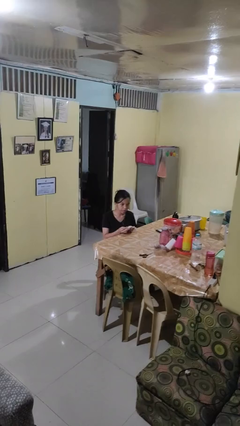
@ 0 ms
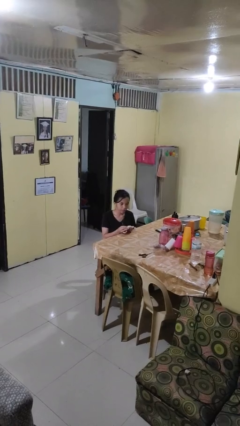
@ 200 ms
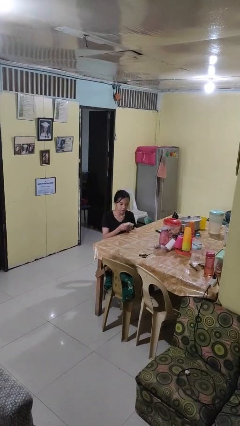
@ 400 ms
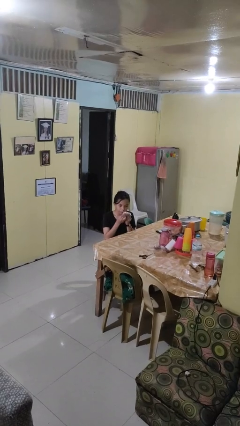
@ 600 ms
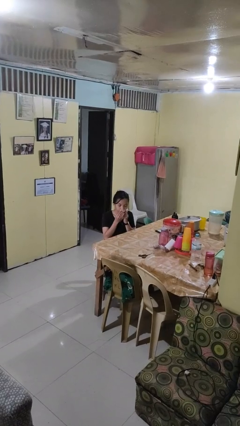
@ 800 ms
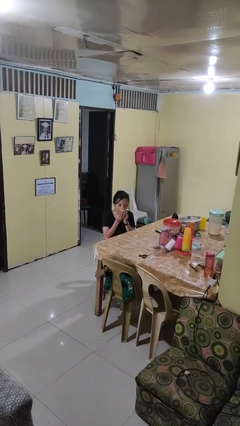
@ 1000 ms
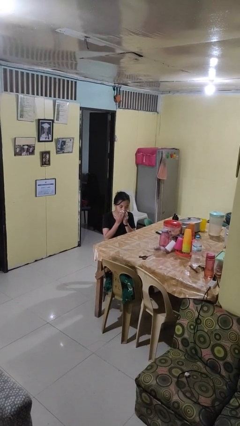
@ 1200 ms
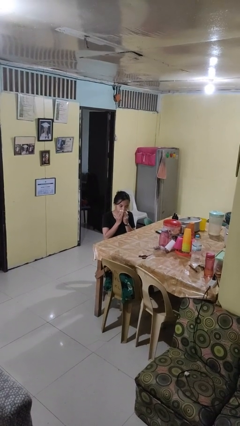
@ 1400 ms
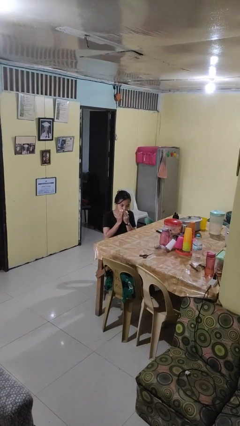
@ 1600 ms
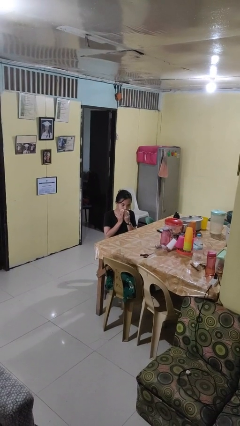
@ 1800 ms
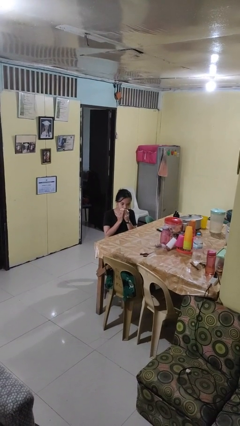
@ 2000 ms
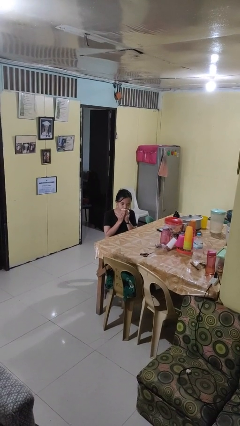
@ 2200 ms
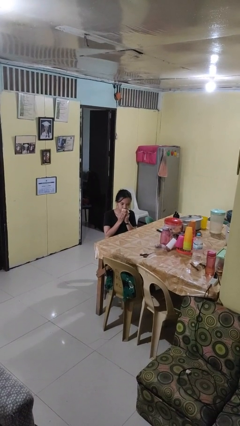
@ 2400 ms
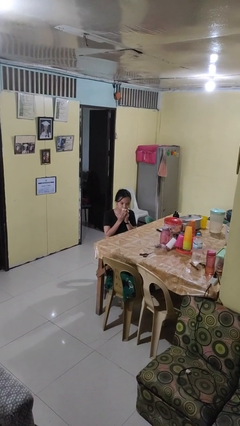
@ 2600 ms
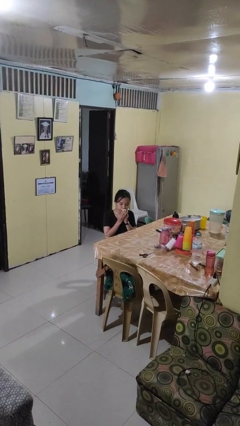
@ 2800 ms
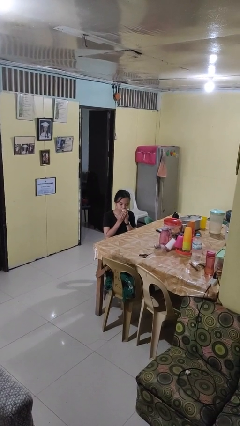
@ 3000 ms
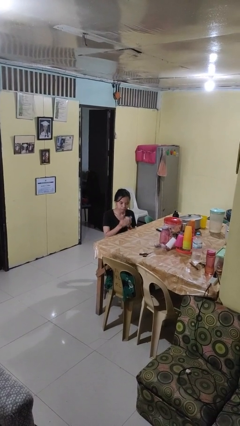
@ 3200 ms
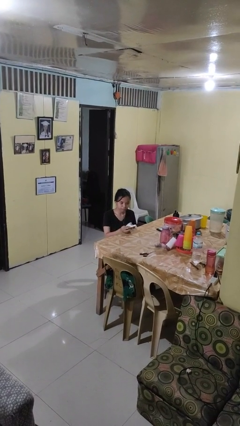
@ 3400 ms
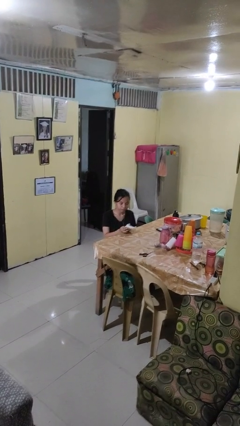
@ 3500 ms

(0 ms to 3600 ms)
person wipes mouth with napkin

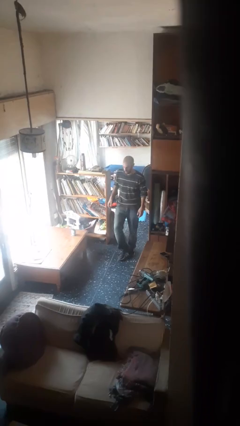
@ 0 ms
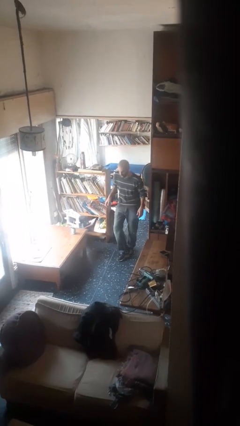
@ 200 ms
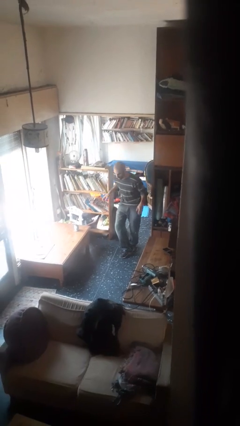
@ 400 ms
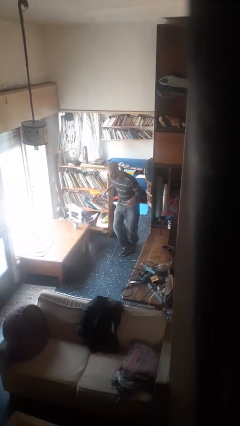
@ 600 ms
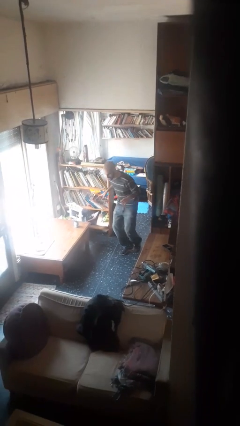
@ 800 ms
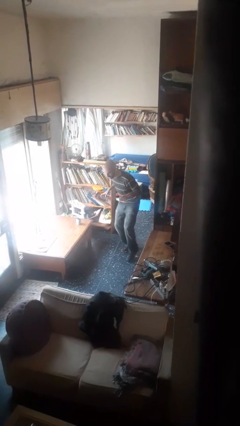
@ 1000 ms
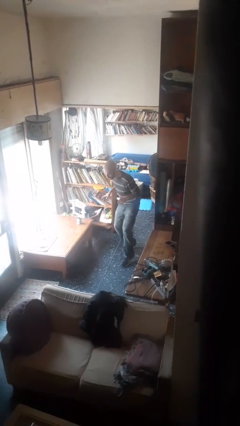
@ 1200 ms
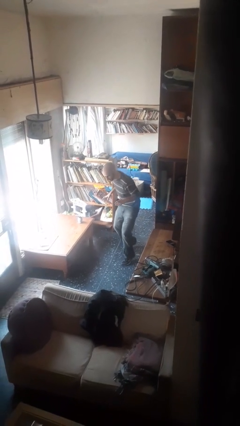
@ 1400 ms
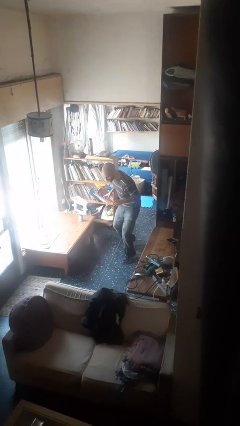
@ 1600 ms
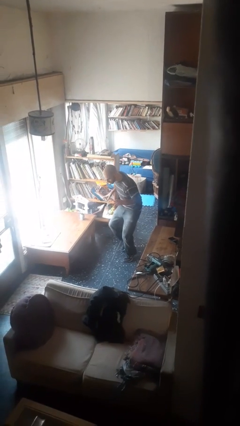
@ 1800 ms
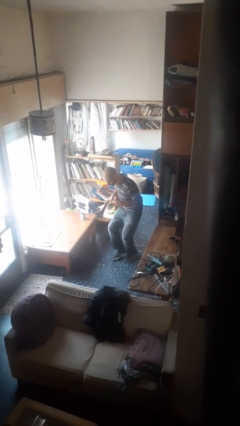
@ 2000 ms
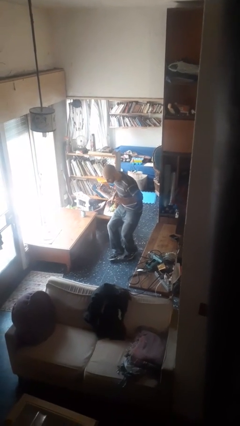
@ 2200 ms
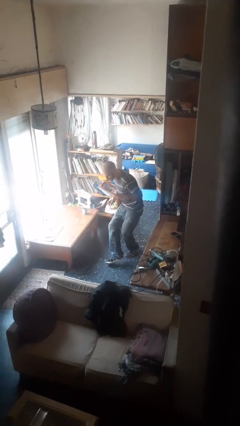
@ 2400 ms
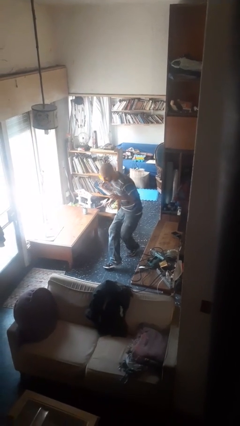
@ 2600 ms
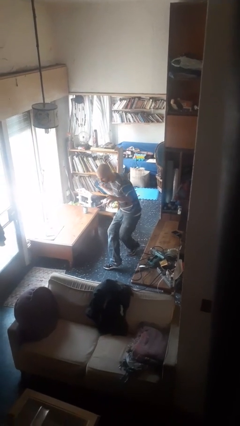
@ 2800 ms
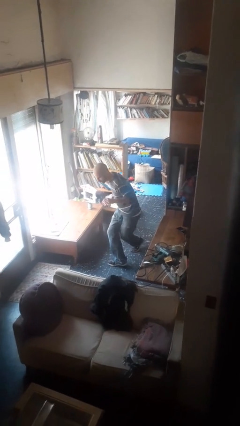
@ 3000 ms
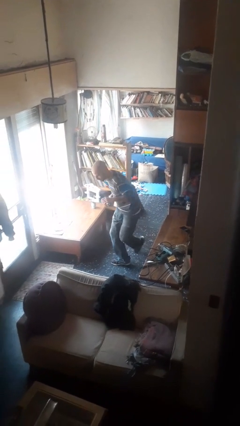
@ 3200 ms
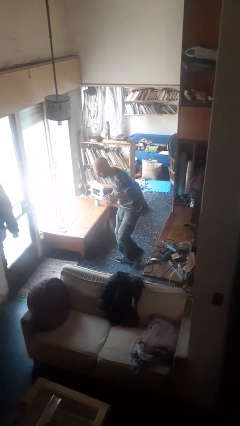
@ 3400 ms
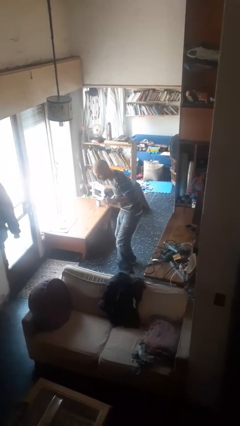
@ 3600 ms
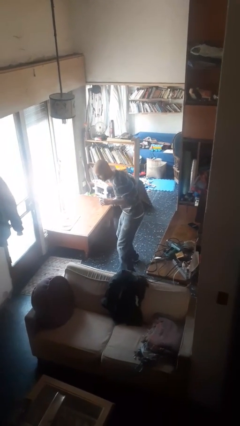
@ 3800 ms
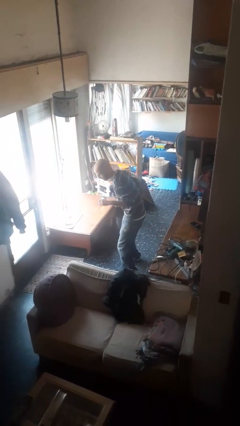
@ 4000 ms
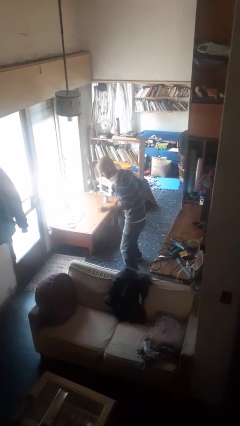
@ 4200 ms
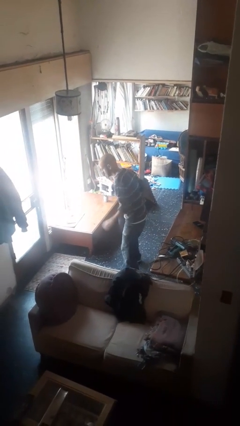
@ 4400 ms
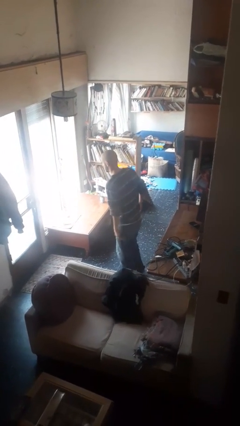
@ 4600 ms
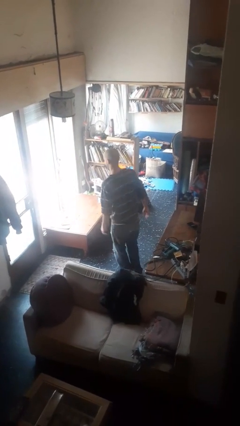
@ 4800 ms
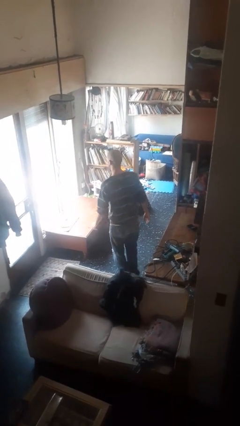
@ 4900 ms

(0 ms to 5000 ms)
person walks tiptoe

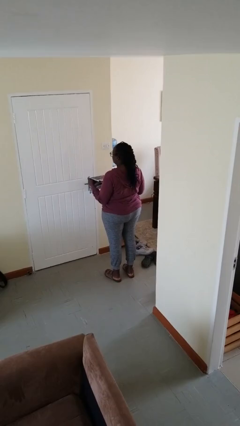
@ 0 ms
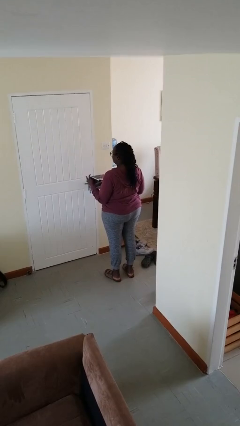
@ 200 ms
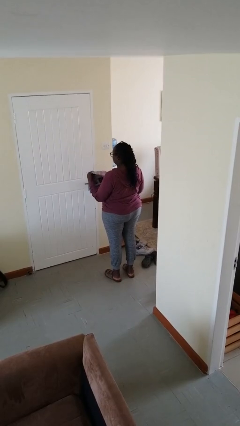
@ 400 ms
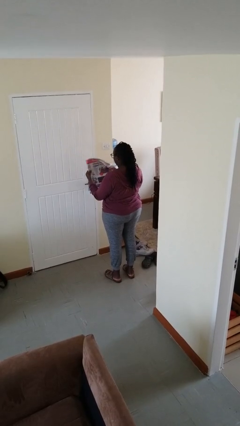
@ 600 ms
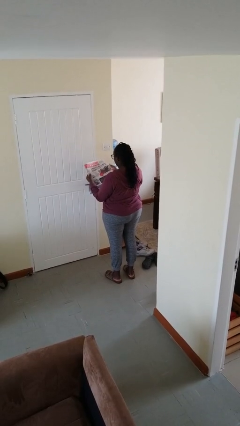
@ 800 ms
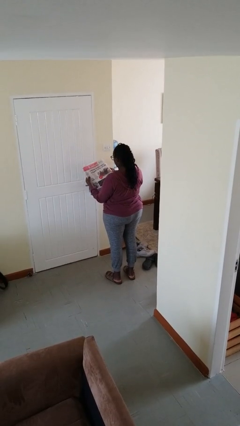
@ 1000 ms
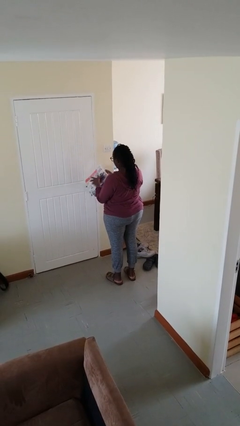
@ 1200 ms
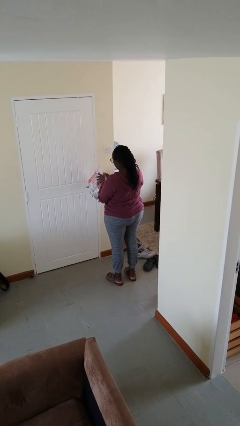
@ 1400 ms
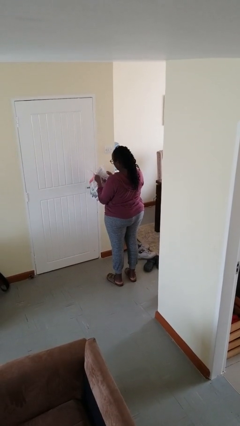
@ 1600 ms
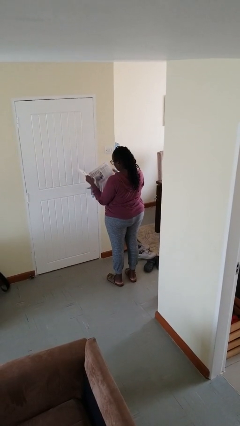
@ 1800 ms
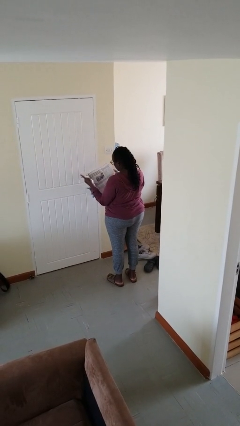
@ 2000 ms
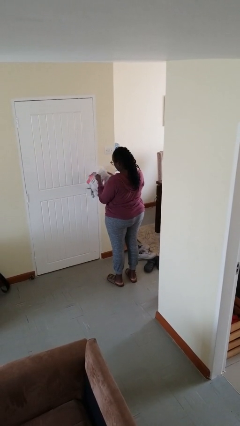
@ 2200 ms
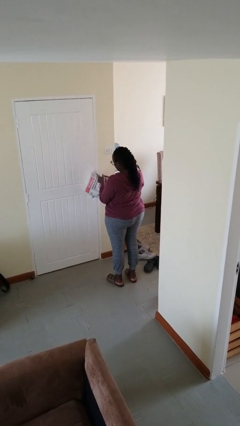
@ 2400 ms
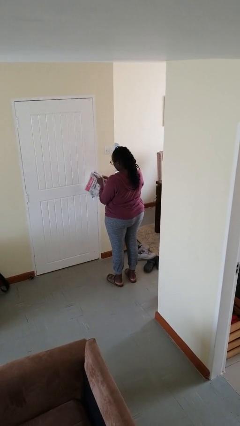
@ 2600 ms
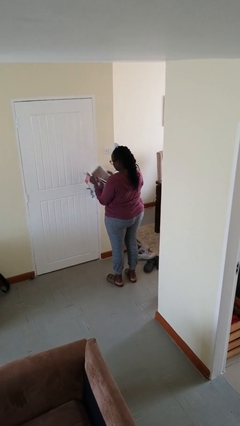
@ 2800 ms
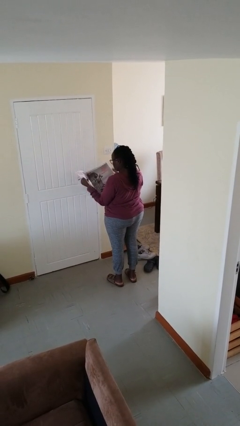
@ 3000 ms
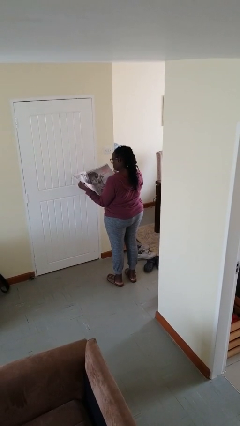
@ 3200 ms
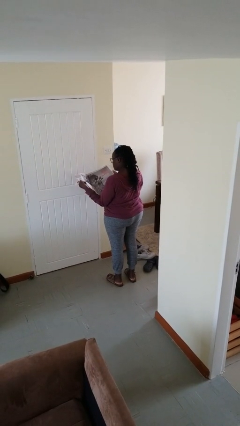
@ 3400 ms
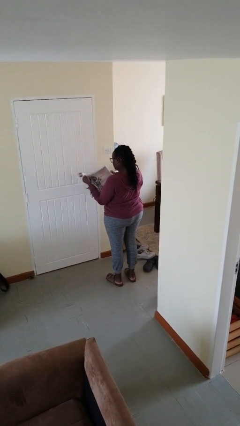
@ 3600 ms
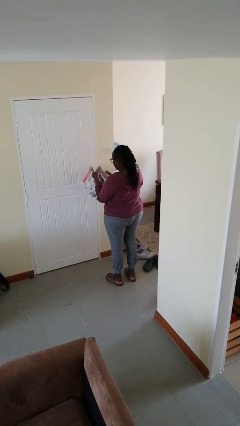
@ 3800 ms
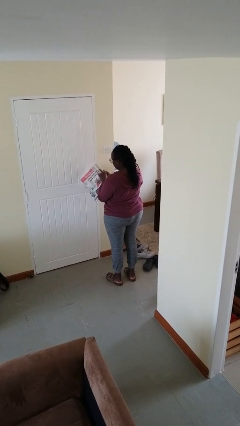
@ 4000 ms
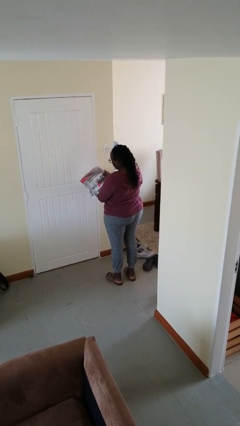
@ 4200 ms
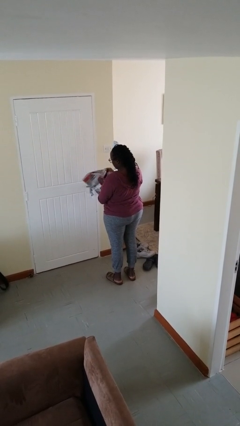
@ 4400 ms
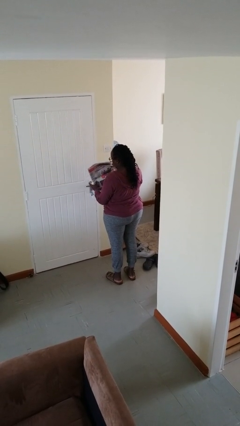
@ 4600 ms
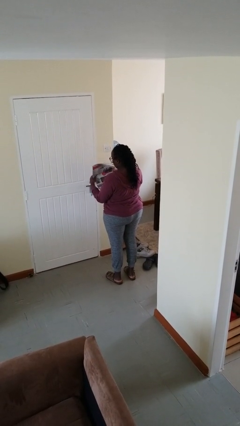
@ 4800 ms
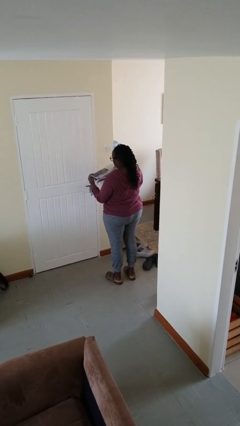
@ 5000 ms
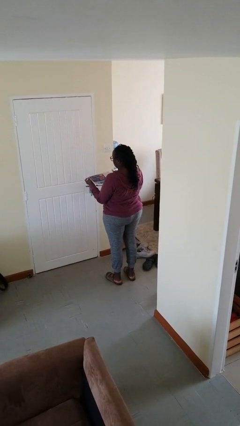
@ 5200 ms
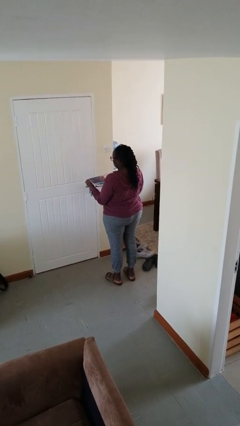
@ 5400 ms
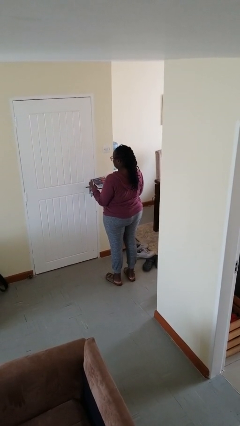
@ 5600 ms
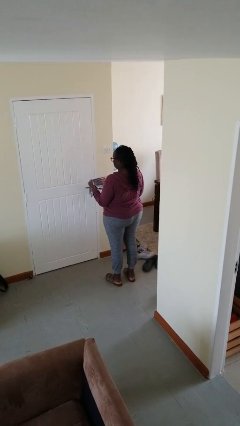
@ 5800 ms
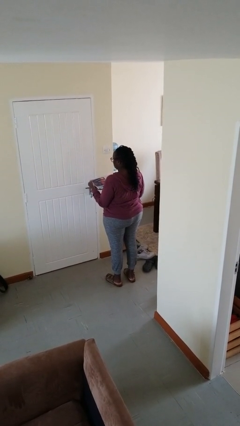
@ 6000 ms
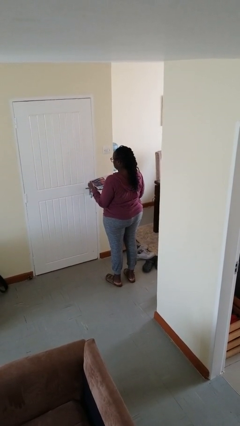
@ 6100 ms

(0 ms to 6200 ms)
person reads newspaper

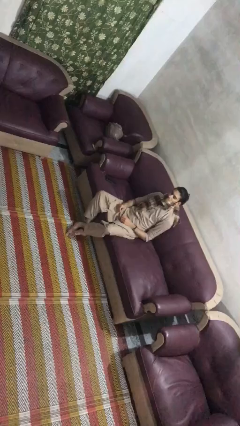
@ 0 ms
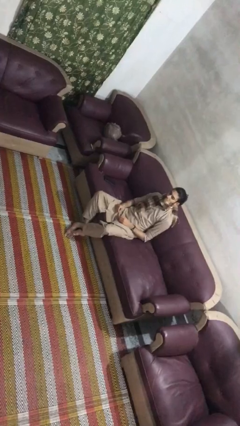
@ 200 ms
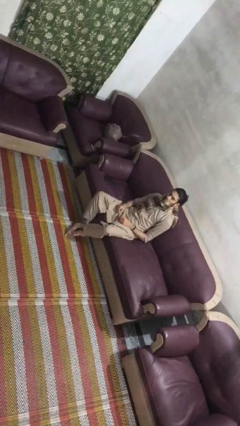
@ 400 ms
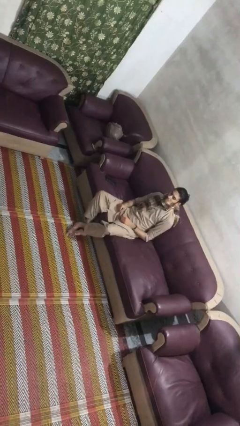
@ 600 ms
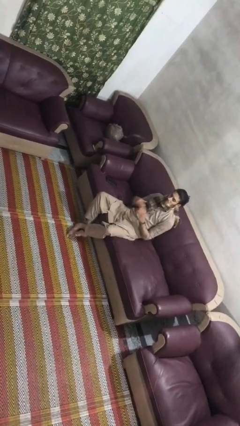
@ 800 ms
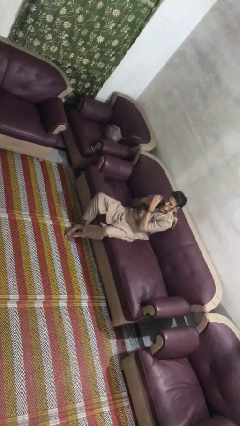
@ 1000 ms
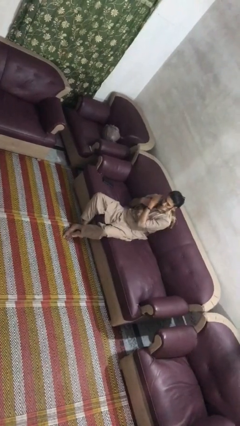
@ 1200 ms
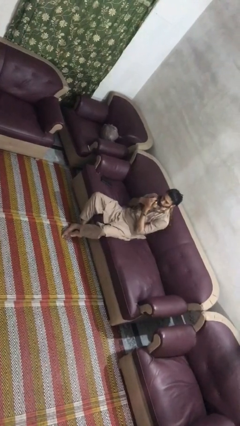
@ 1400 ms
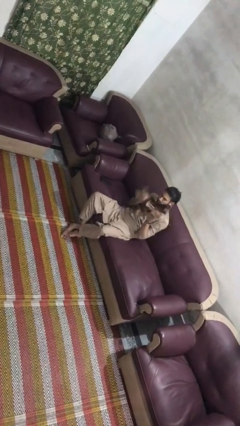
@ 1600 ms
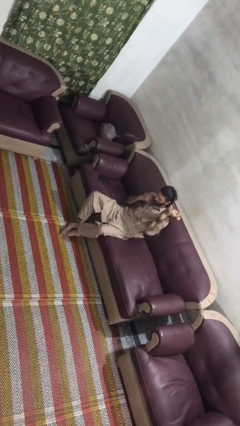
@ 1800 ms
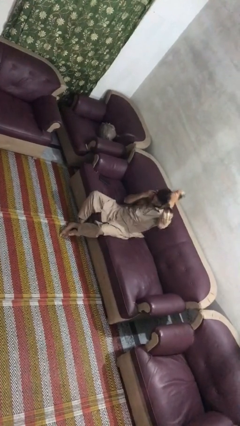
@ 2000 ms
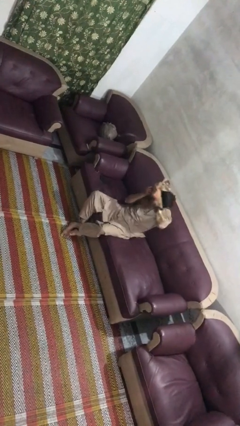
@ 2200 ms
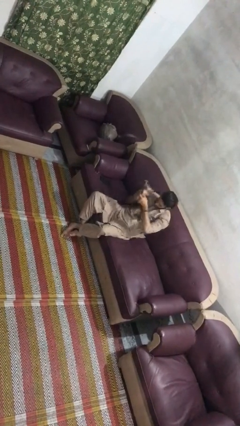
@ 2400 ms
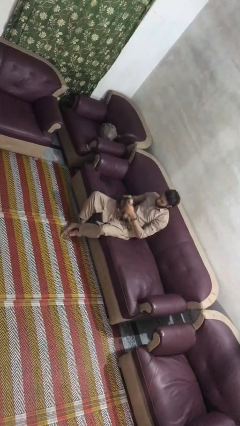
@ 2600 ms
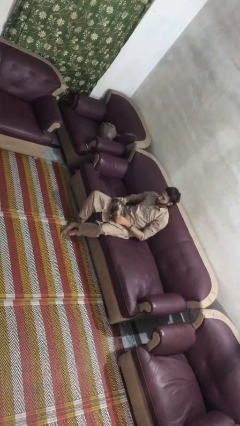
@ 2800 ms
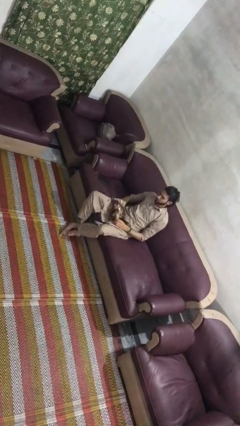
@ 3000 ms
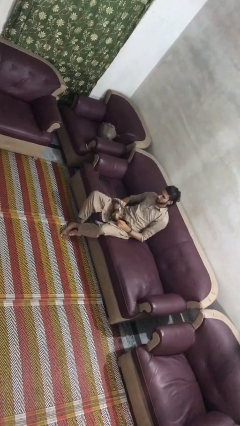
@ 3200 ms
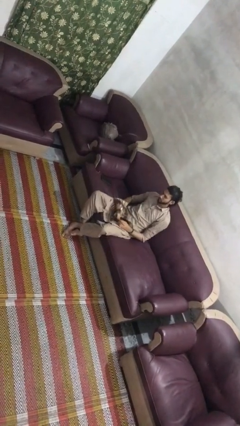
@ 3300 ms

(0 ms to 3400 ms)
person takes off scarf
